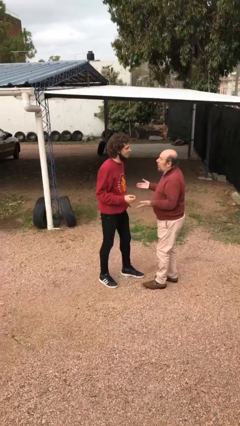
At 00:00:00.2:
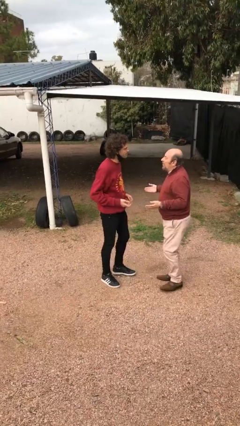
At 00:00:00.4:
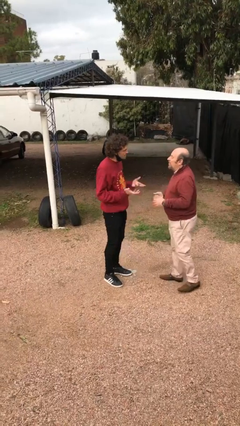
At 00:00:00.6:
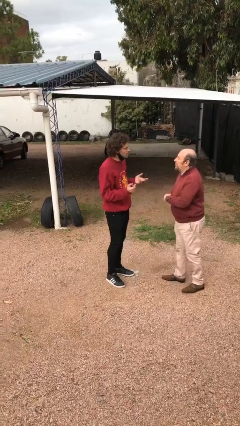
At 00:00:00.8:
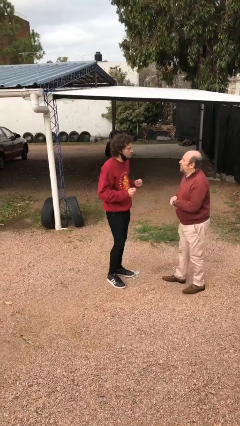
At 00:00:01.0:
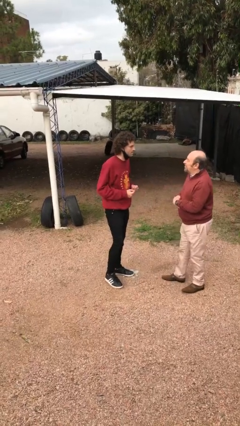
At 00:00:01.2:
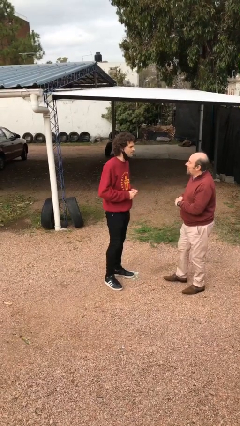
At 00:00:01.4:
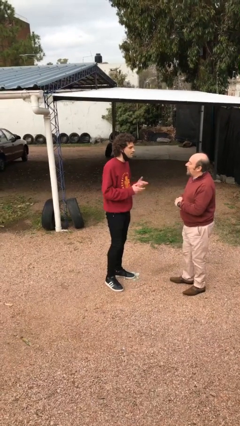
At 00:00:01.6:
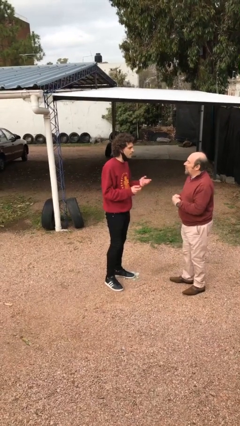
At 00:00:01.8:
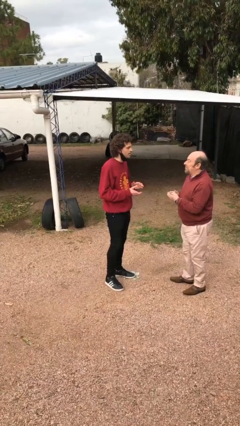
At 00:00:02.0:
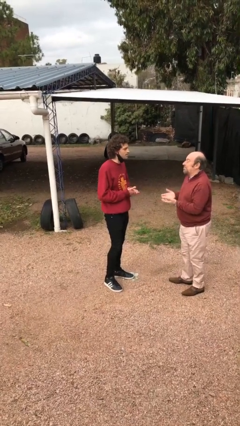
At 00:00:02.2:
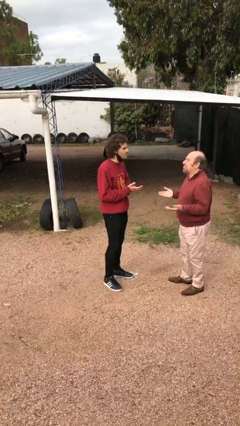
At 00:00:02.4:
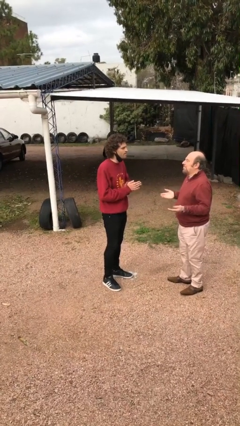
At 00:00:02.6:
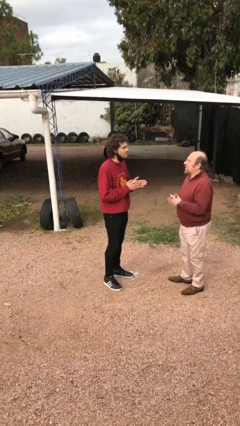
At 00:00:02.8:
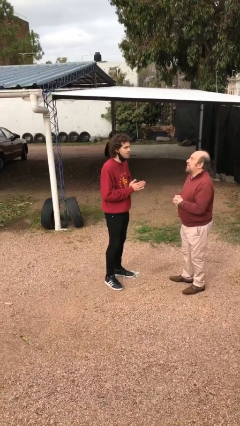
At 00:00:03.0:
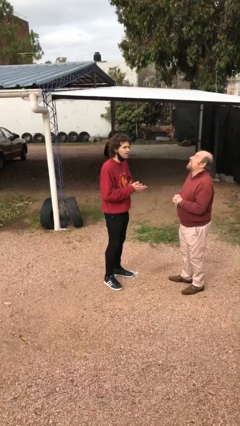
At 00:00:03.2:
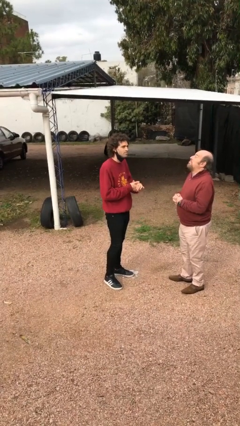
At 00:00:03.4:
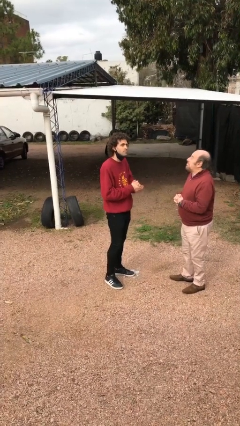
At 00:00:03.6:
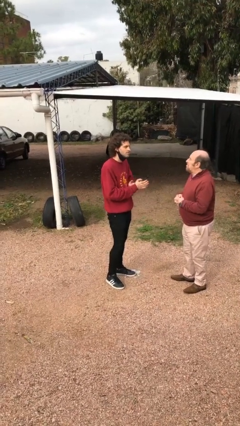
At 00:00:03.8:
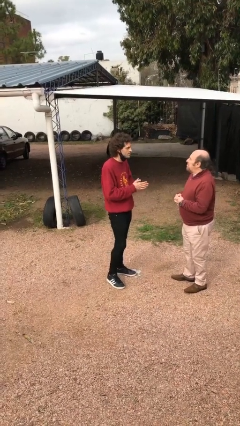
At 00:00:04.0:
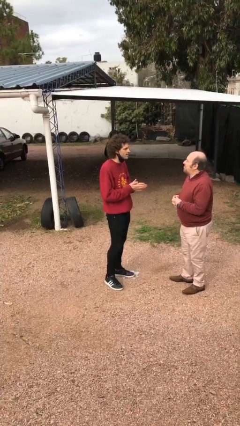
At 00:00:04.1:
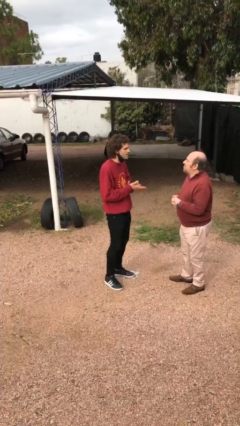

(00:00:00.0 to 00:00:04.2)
person talks to person

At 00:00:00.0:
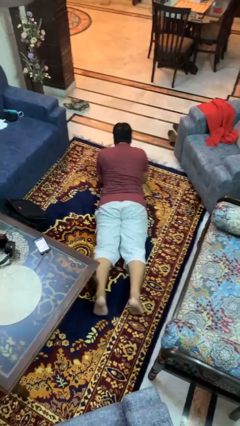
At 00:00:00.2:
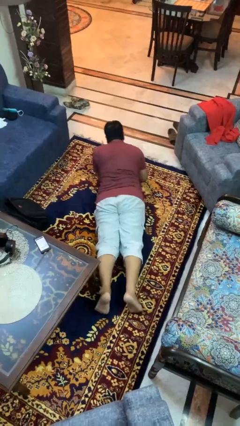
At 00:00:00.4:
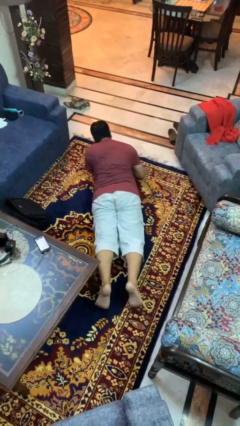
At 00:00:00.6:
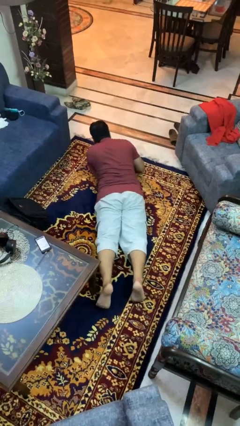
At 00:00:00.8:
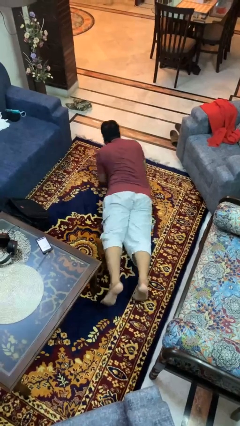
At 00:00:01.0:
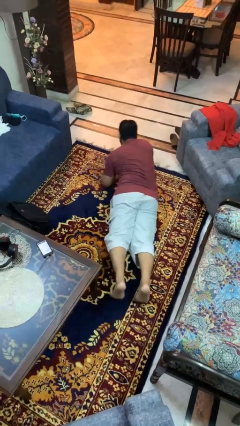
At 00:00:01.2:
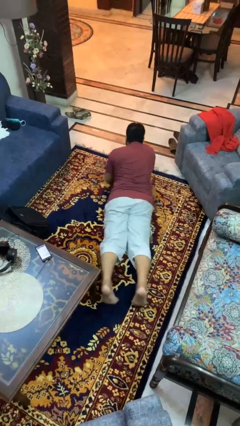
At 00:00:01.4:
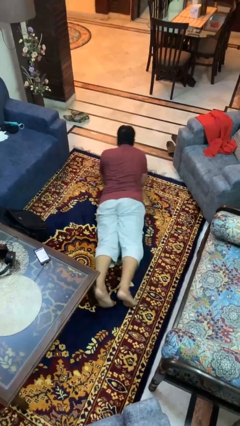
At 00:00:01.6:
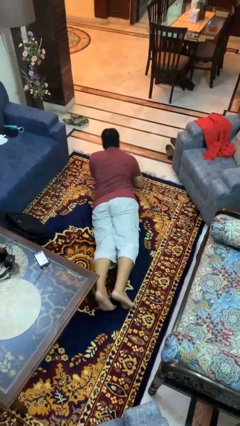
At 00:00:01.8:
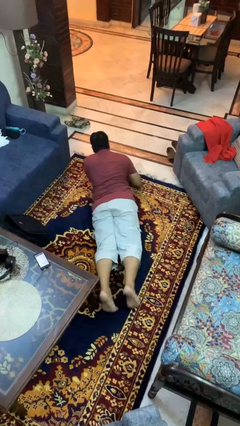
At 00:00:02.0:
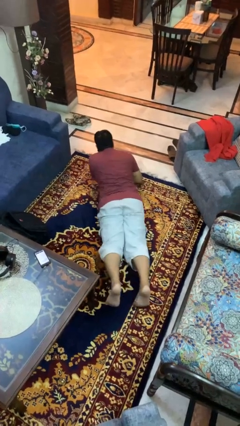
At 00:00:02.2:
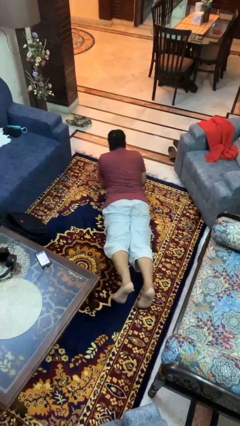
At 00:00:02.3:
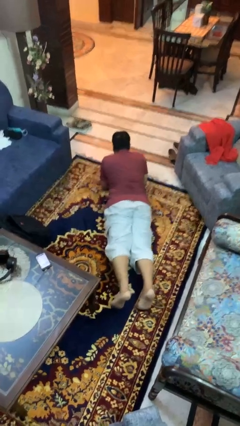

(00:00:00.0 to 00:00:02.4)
person crawls

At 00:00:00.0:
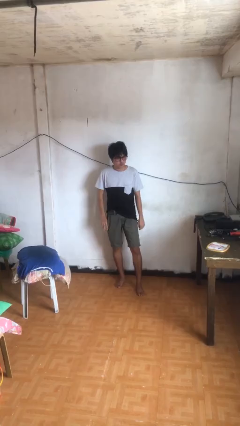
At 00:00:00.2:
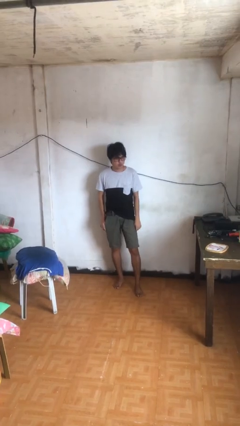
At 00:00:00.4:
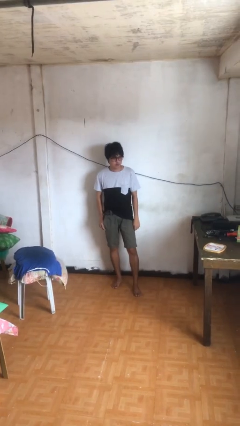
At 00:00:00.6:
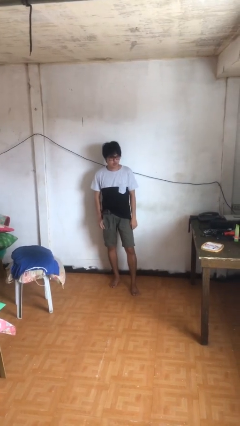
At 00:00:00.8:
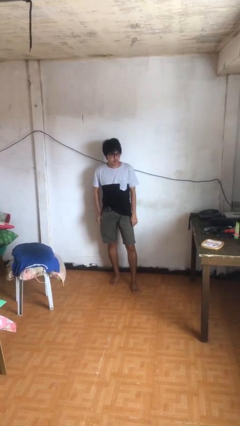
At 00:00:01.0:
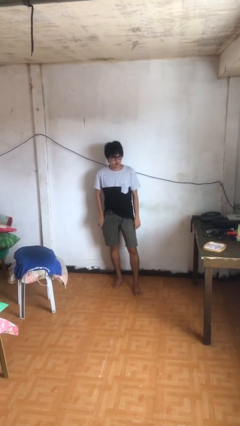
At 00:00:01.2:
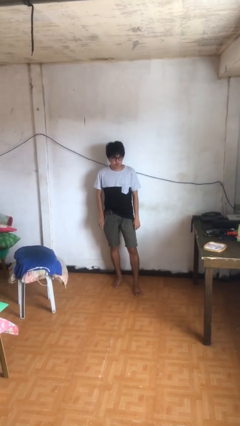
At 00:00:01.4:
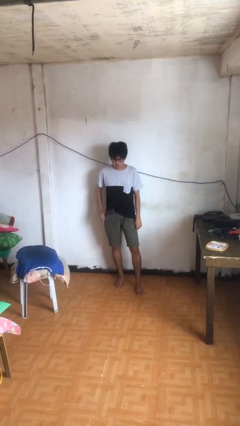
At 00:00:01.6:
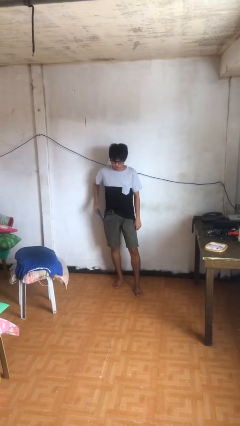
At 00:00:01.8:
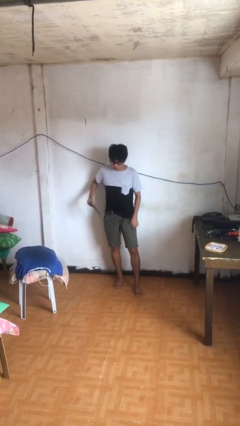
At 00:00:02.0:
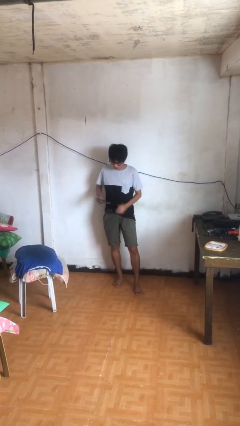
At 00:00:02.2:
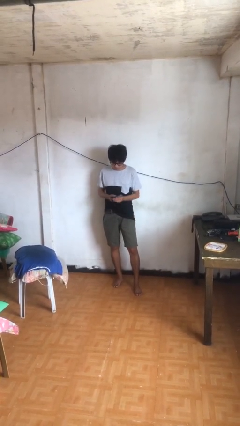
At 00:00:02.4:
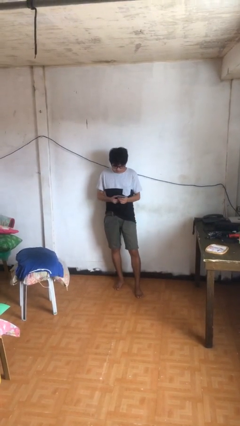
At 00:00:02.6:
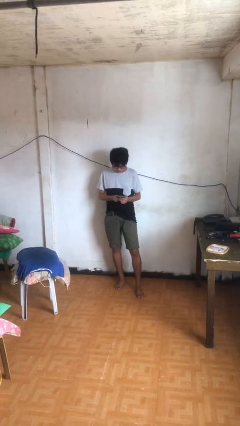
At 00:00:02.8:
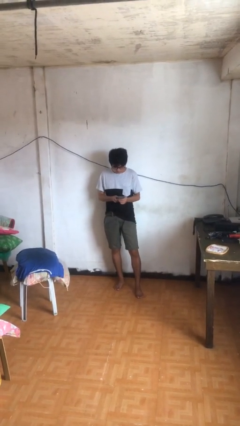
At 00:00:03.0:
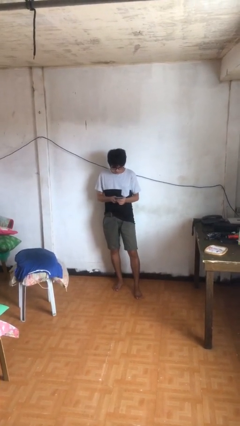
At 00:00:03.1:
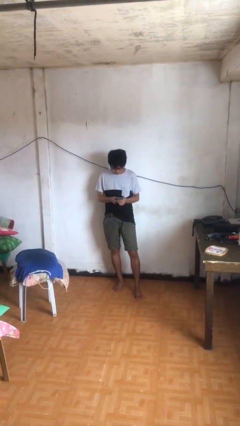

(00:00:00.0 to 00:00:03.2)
person takes phone from pocket

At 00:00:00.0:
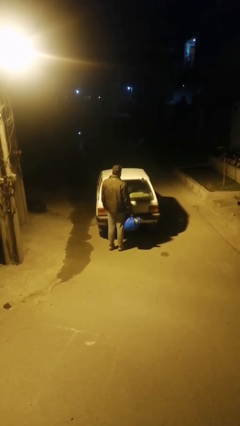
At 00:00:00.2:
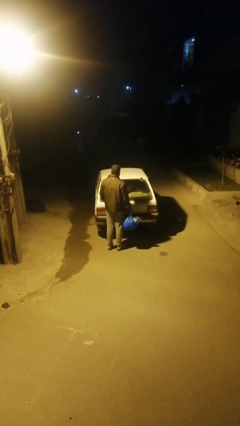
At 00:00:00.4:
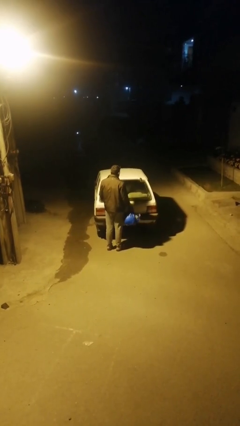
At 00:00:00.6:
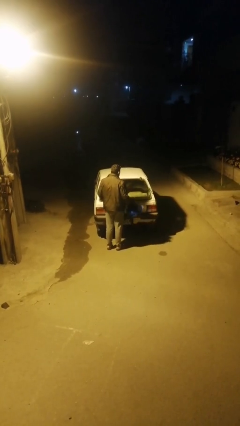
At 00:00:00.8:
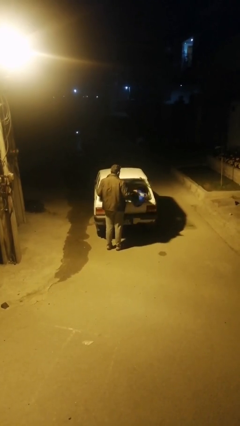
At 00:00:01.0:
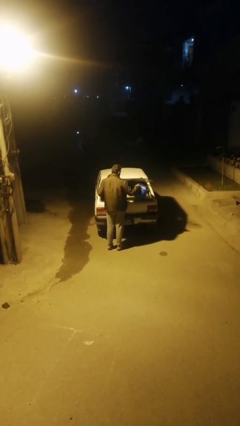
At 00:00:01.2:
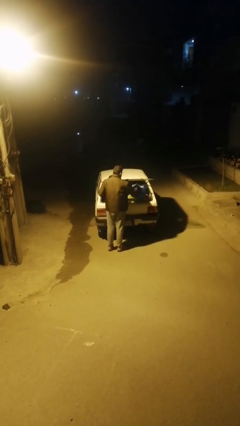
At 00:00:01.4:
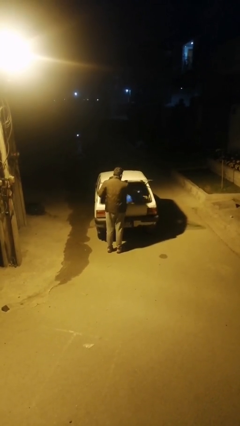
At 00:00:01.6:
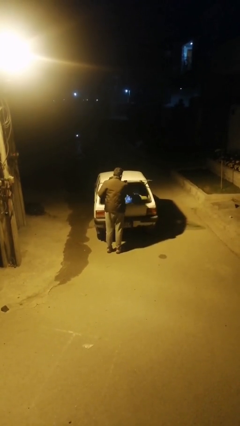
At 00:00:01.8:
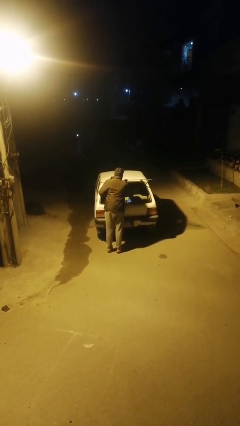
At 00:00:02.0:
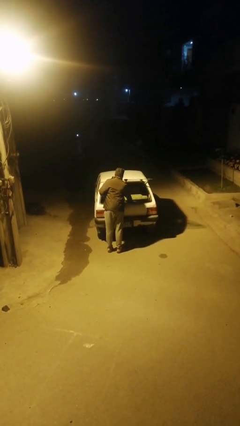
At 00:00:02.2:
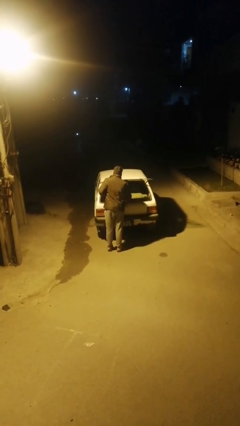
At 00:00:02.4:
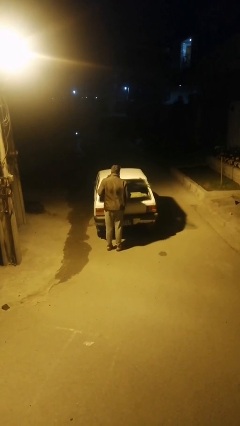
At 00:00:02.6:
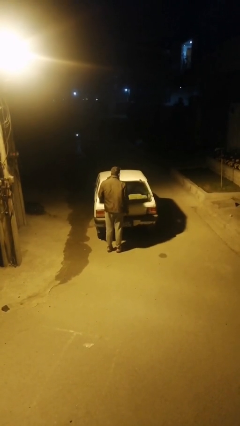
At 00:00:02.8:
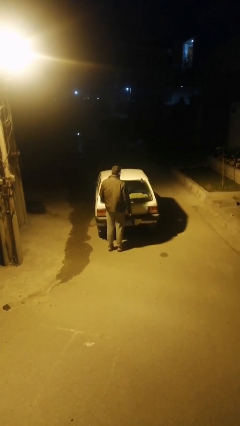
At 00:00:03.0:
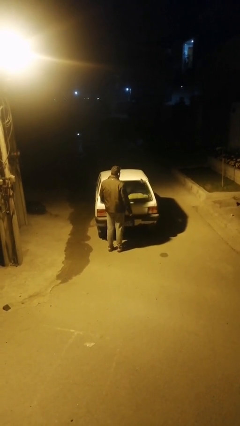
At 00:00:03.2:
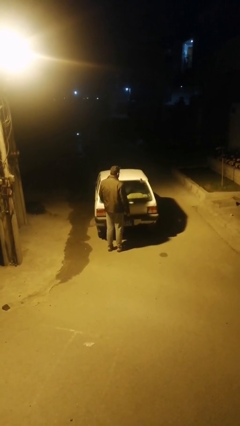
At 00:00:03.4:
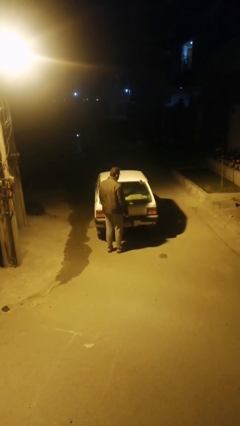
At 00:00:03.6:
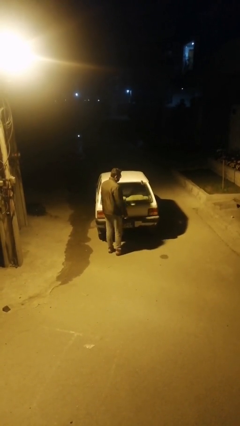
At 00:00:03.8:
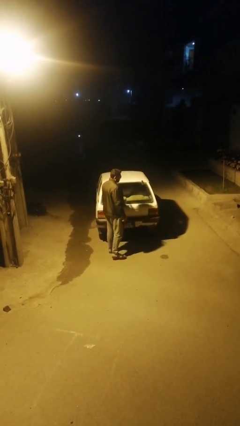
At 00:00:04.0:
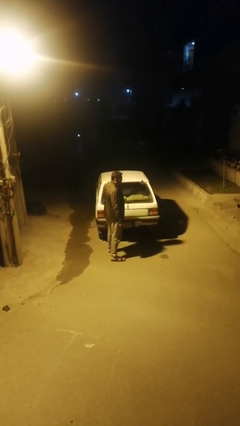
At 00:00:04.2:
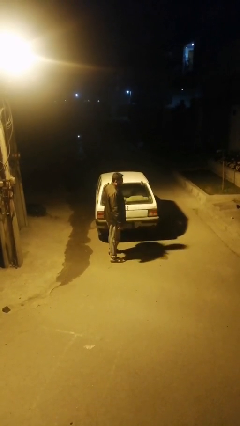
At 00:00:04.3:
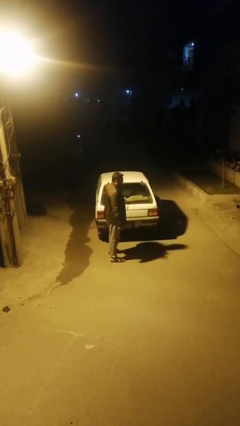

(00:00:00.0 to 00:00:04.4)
person loads car

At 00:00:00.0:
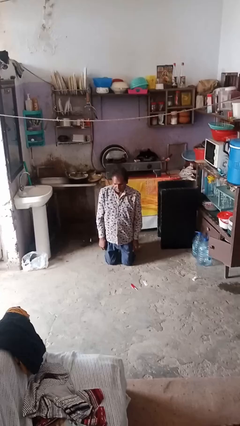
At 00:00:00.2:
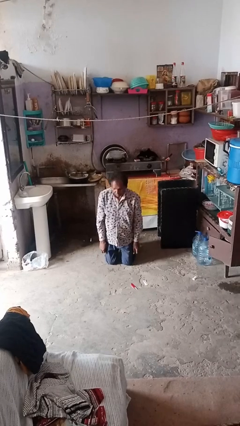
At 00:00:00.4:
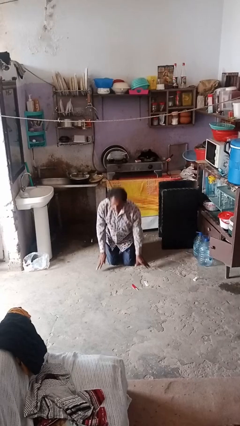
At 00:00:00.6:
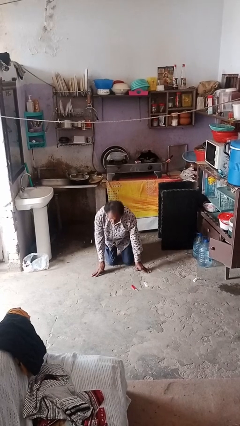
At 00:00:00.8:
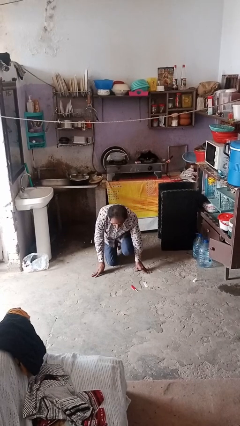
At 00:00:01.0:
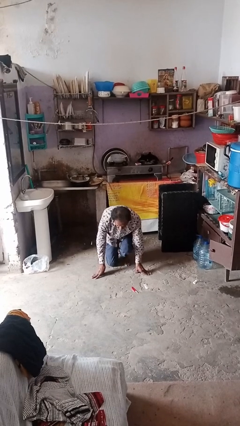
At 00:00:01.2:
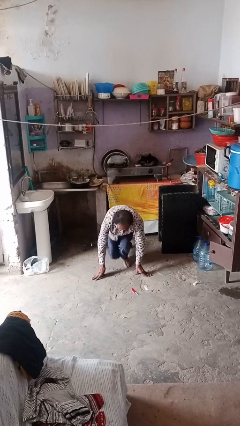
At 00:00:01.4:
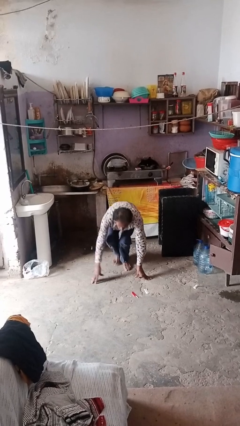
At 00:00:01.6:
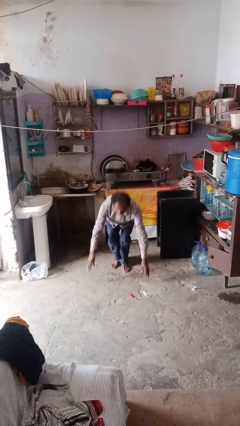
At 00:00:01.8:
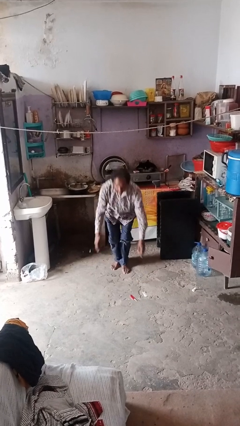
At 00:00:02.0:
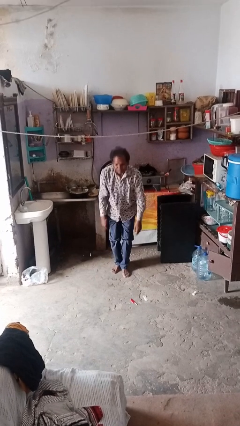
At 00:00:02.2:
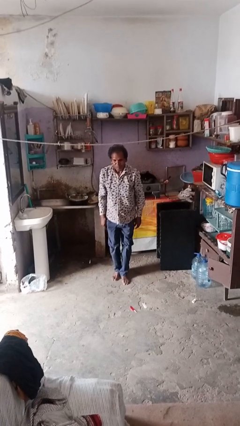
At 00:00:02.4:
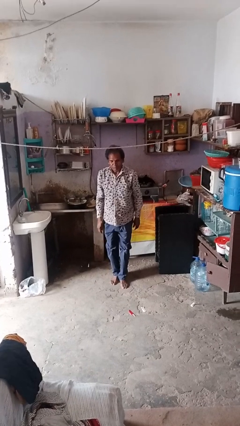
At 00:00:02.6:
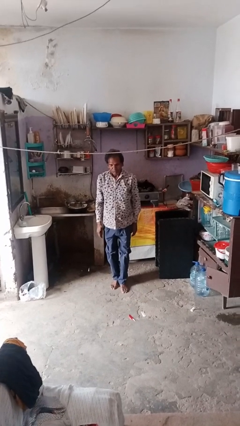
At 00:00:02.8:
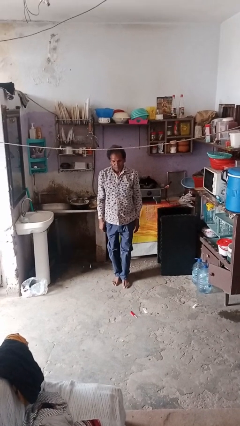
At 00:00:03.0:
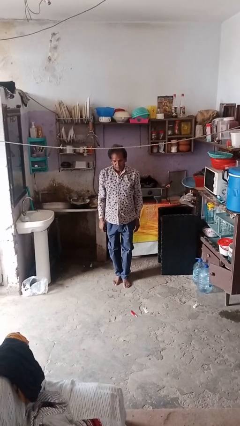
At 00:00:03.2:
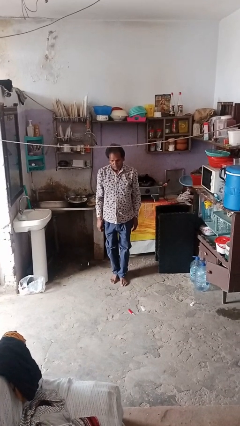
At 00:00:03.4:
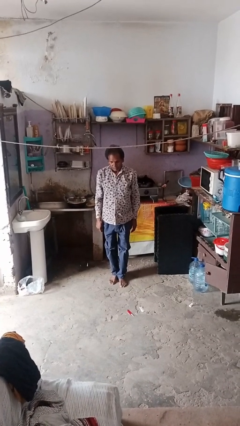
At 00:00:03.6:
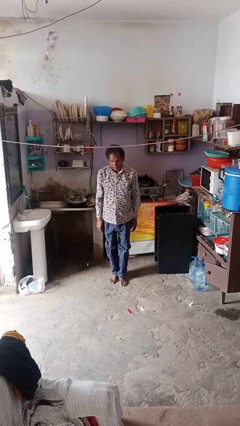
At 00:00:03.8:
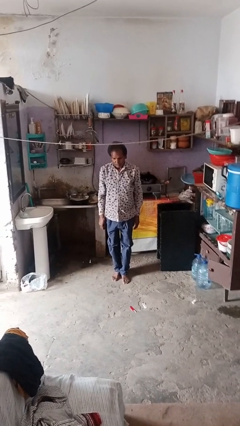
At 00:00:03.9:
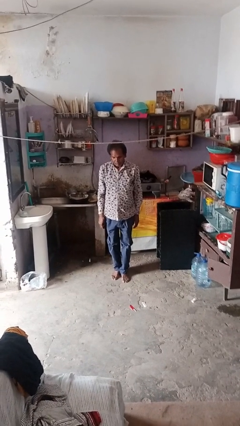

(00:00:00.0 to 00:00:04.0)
person stands up from floor
